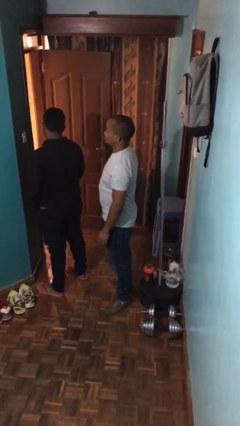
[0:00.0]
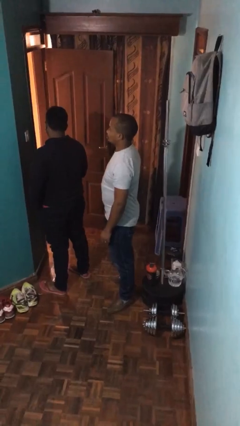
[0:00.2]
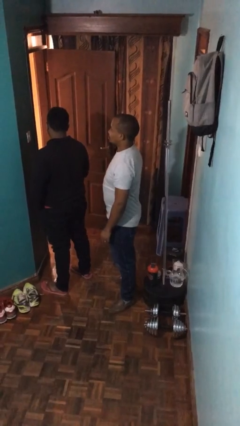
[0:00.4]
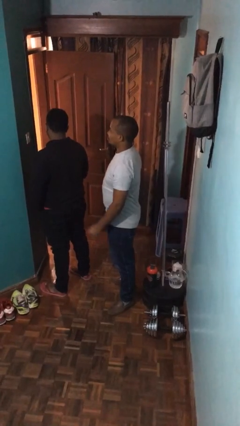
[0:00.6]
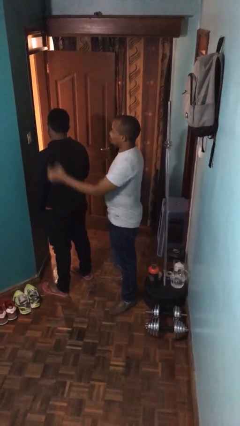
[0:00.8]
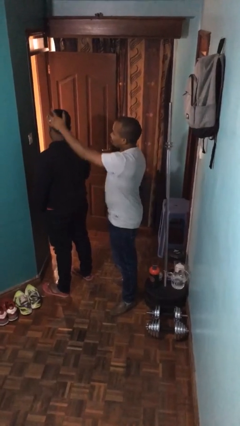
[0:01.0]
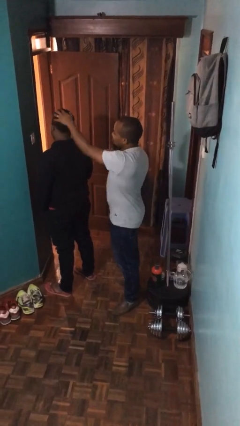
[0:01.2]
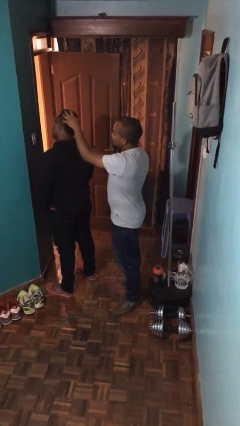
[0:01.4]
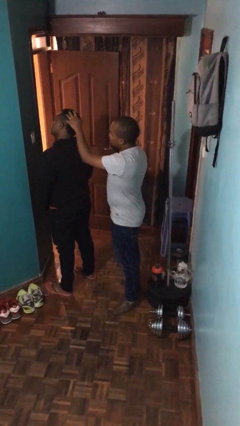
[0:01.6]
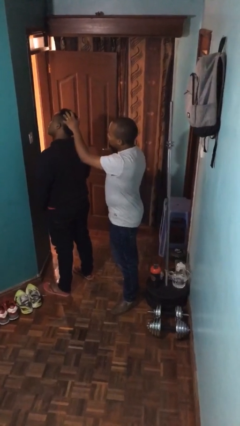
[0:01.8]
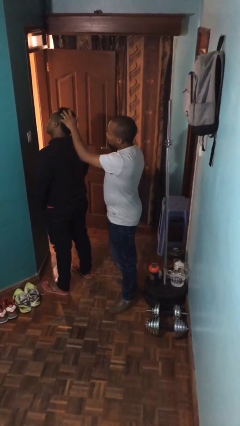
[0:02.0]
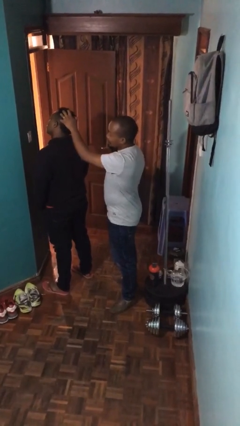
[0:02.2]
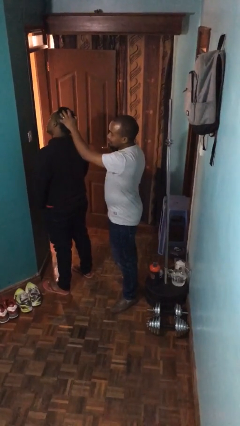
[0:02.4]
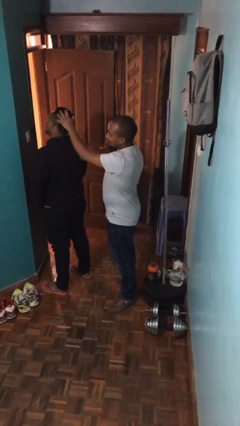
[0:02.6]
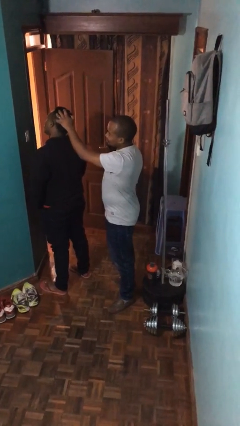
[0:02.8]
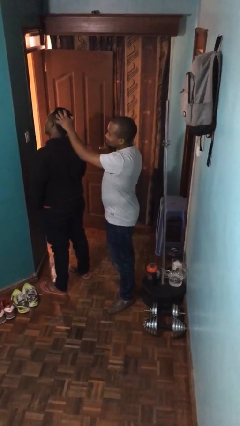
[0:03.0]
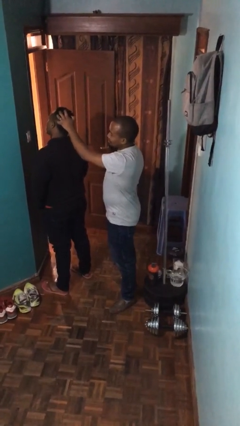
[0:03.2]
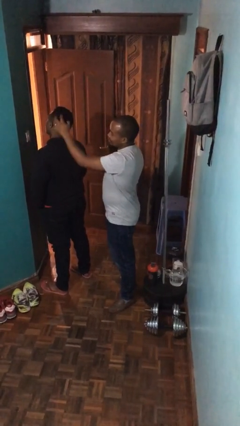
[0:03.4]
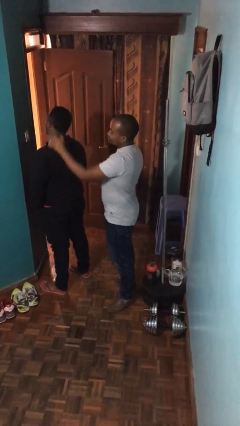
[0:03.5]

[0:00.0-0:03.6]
person grabs person by hair

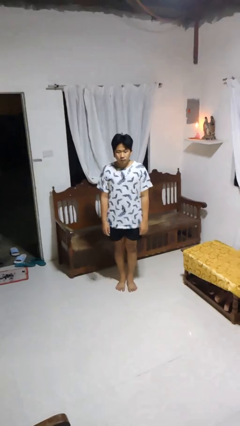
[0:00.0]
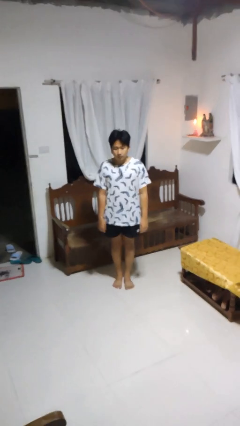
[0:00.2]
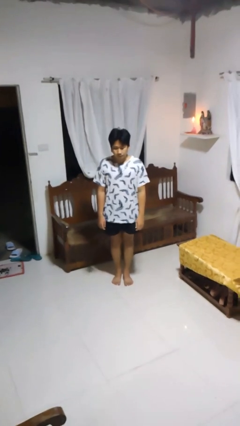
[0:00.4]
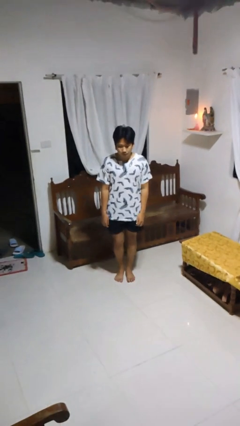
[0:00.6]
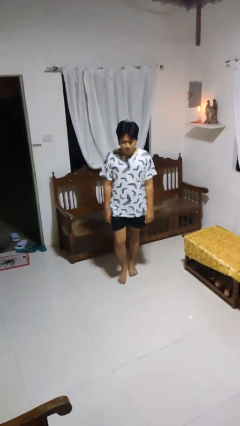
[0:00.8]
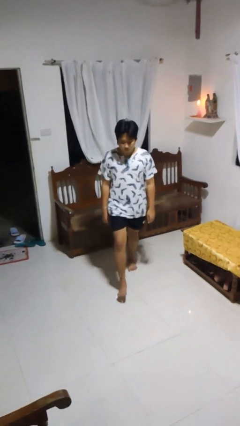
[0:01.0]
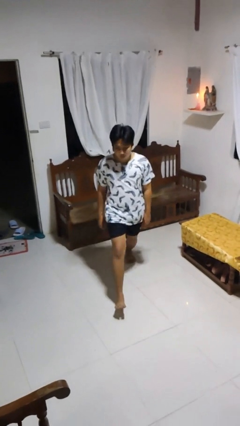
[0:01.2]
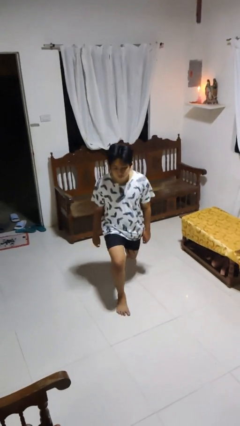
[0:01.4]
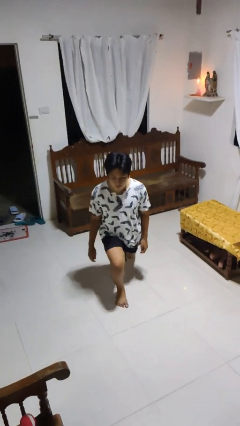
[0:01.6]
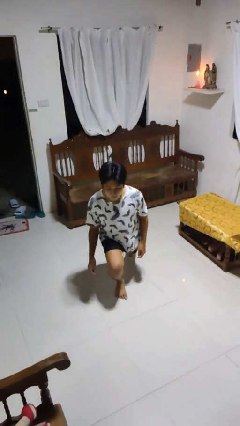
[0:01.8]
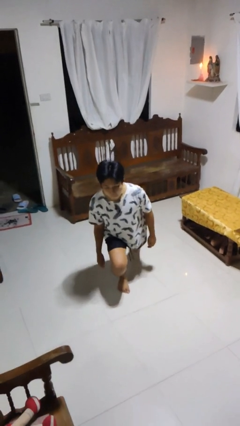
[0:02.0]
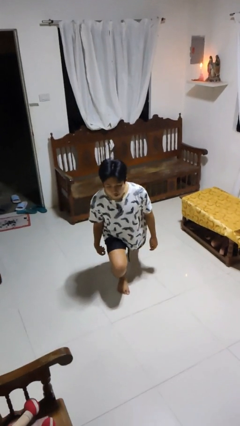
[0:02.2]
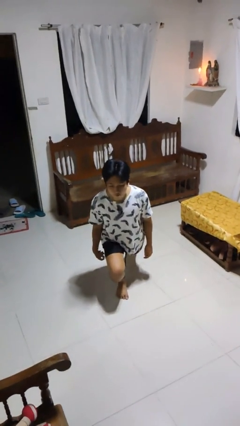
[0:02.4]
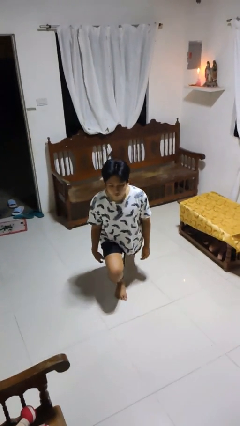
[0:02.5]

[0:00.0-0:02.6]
person exercises with lunges

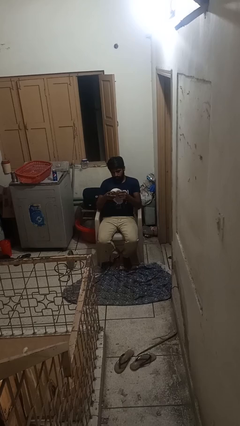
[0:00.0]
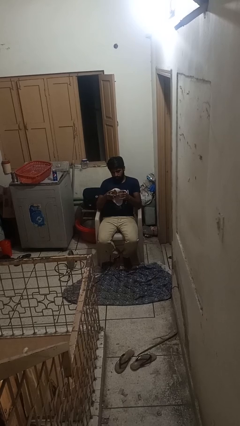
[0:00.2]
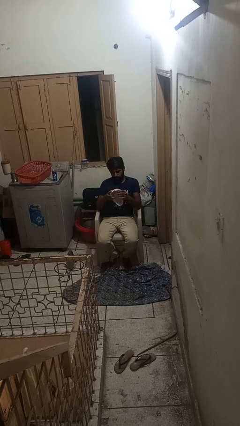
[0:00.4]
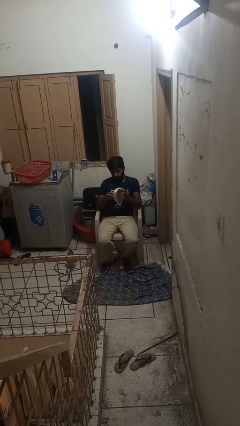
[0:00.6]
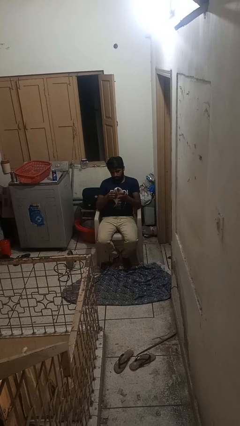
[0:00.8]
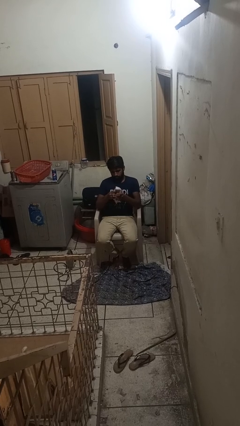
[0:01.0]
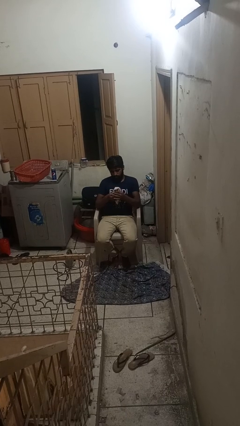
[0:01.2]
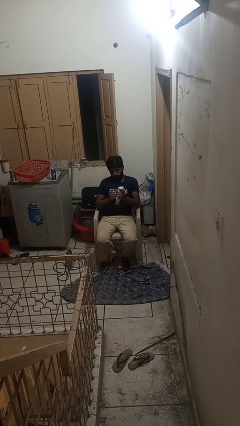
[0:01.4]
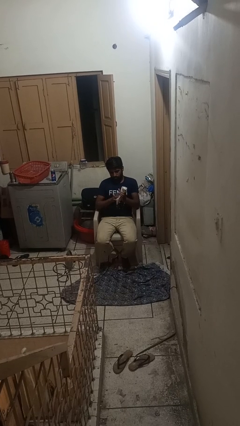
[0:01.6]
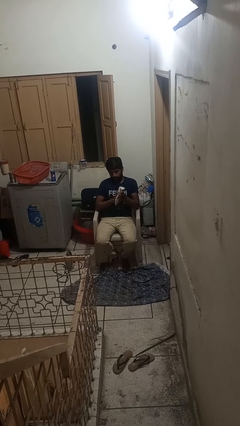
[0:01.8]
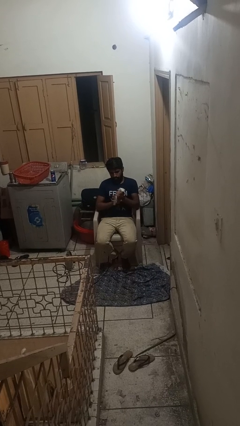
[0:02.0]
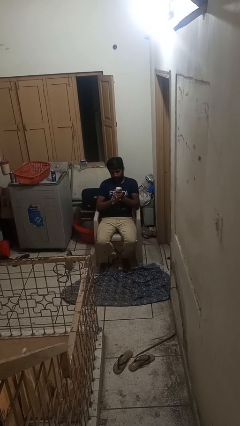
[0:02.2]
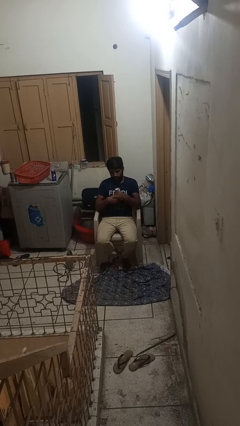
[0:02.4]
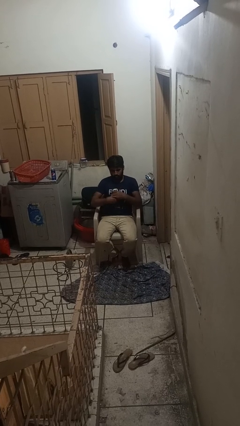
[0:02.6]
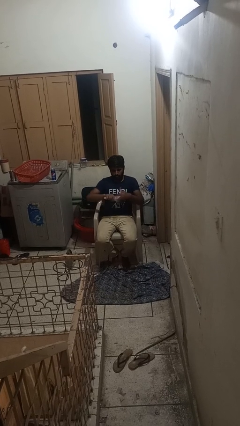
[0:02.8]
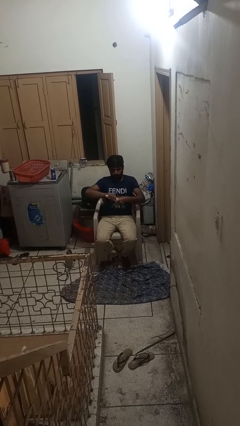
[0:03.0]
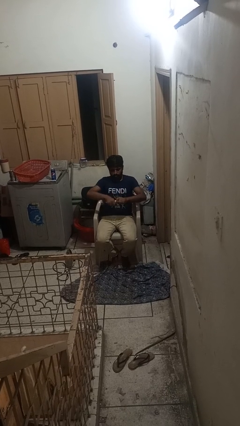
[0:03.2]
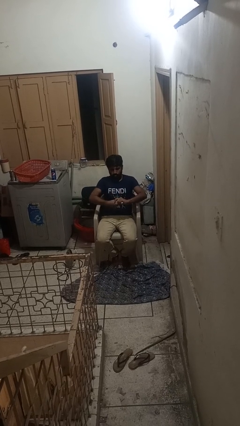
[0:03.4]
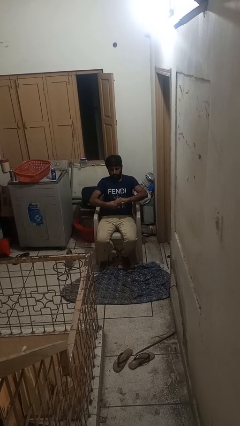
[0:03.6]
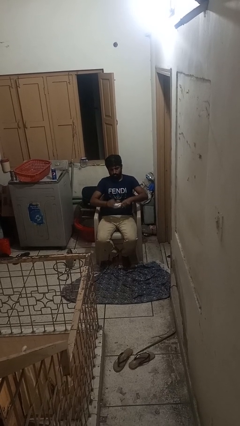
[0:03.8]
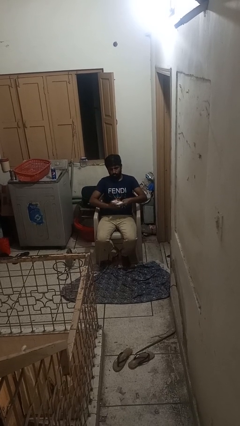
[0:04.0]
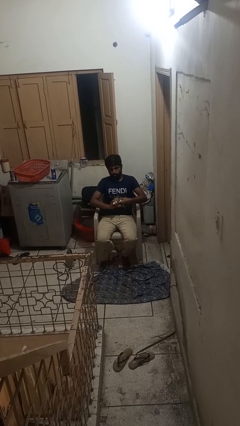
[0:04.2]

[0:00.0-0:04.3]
person squeezes object

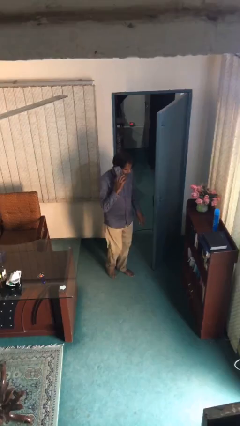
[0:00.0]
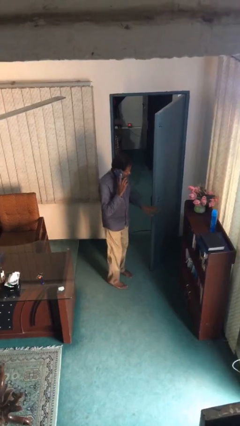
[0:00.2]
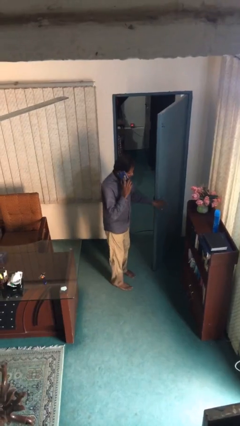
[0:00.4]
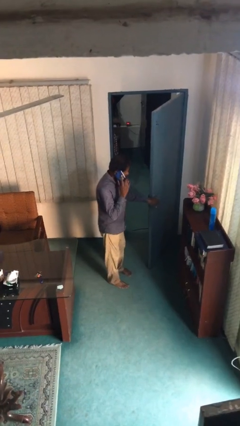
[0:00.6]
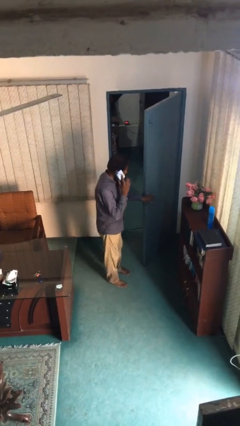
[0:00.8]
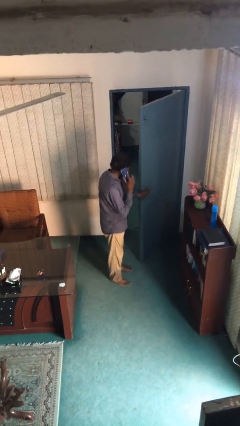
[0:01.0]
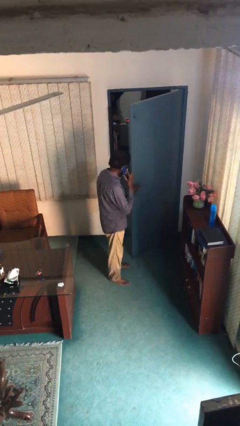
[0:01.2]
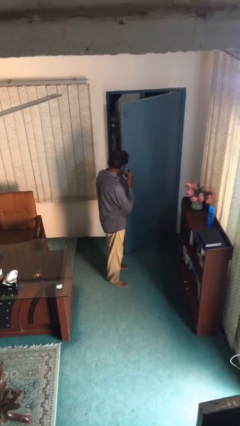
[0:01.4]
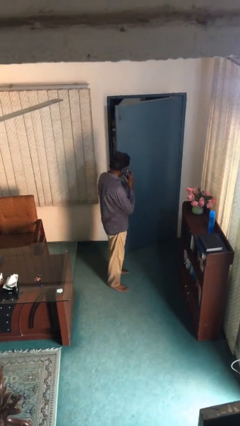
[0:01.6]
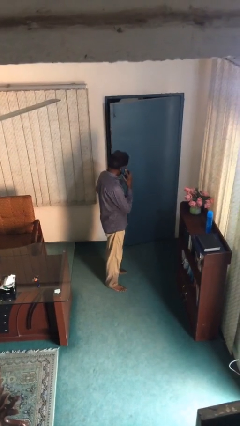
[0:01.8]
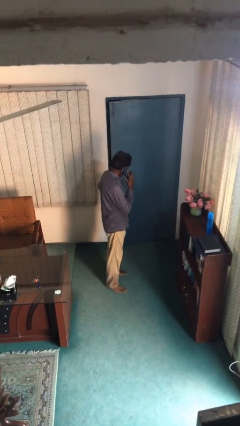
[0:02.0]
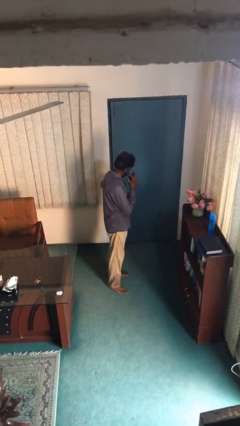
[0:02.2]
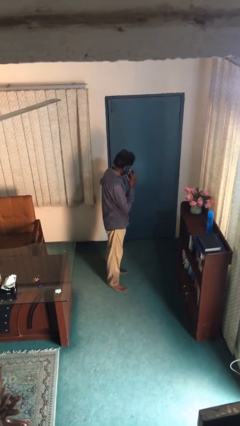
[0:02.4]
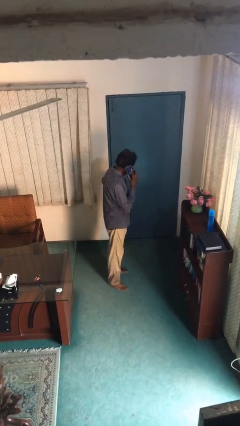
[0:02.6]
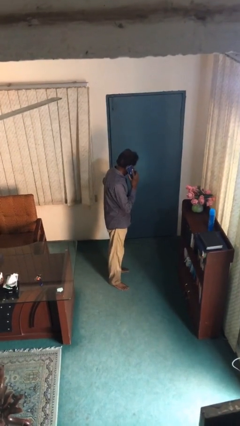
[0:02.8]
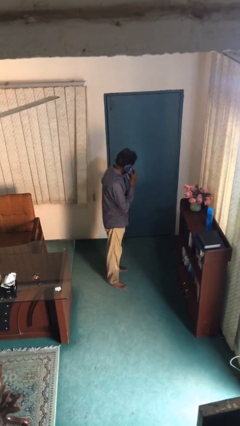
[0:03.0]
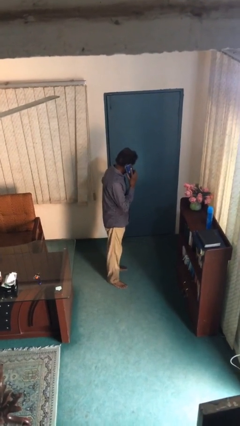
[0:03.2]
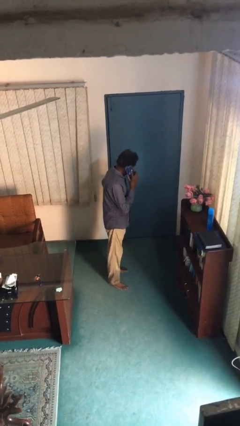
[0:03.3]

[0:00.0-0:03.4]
person closes facility door

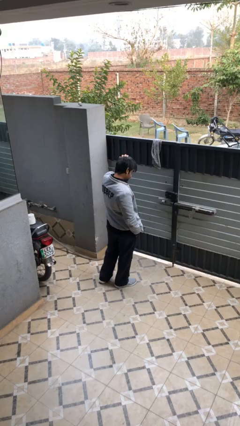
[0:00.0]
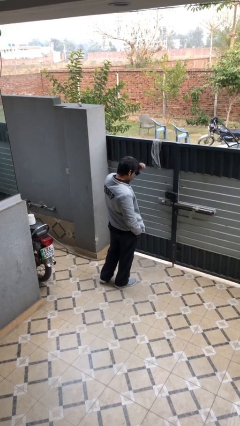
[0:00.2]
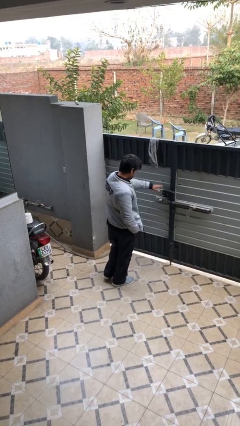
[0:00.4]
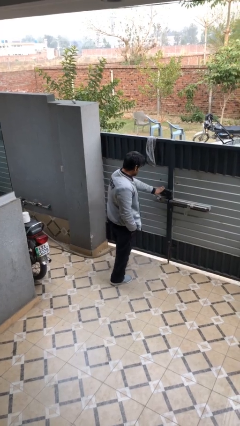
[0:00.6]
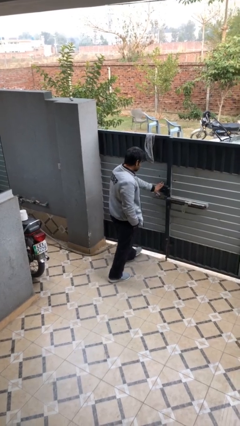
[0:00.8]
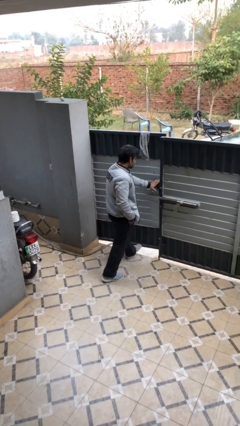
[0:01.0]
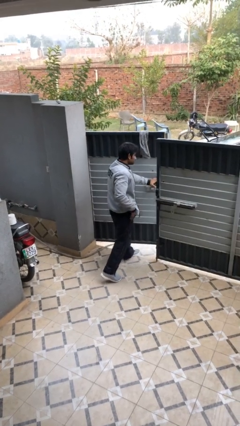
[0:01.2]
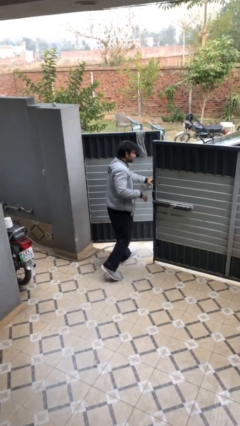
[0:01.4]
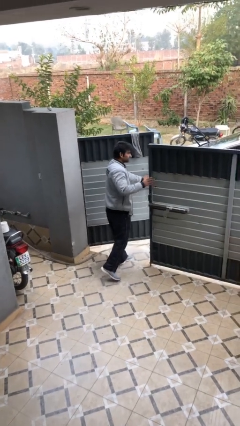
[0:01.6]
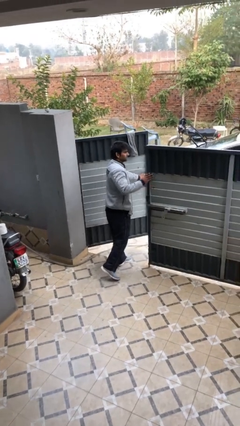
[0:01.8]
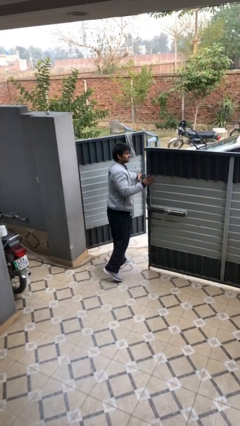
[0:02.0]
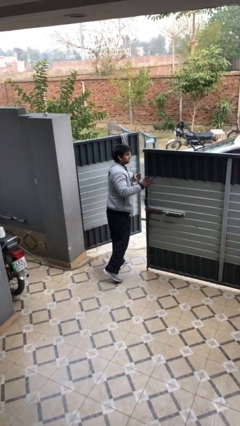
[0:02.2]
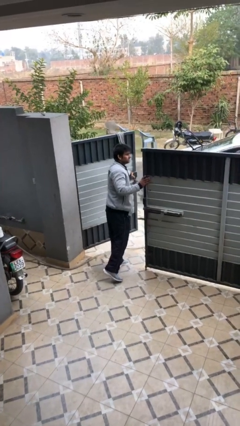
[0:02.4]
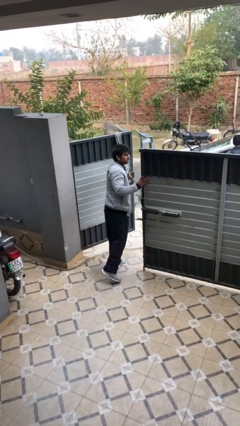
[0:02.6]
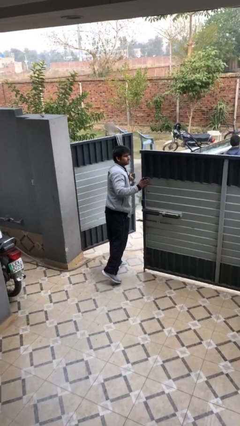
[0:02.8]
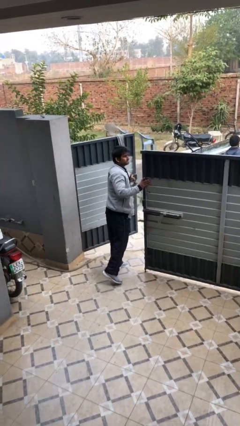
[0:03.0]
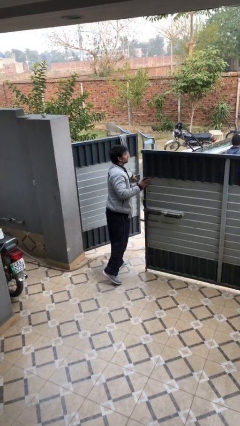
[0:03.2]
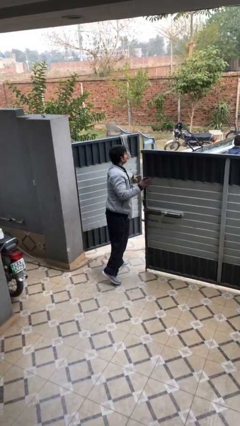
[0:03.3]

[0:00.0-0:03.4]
person opens facility door

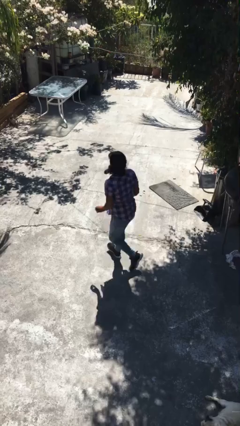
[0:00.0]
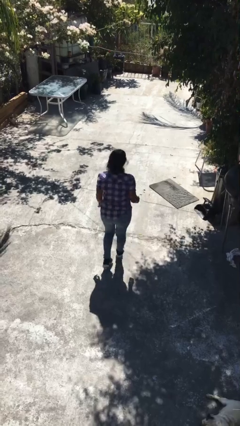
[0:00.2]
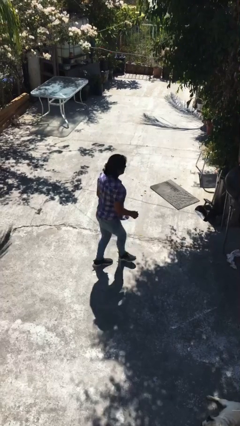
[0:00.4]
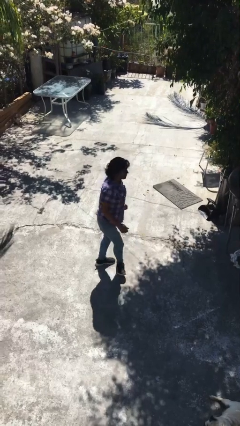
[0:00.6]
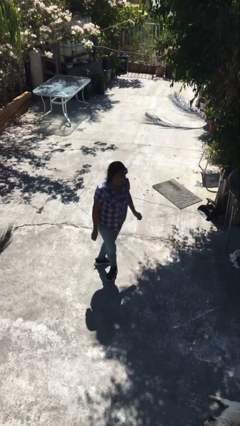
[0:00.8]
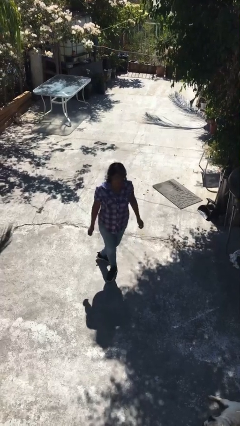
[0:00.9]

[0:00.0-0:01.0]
person twirls
